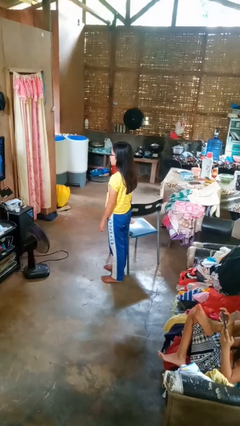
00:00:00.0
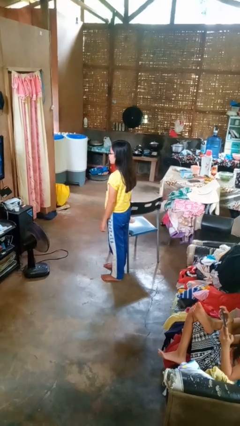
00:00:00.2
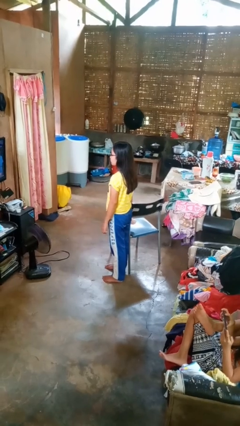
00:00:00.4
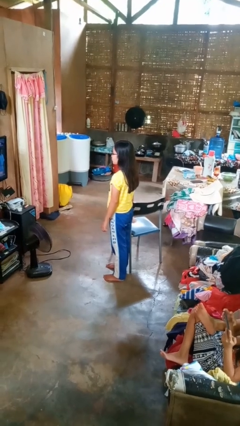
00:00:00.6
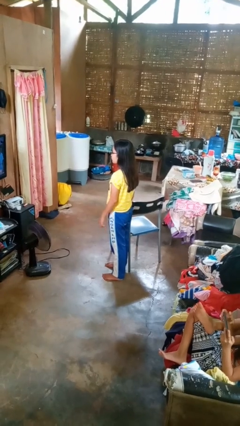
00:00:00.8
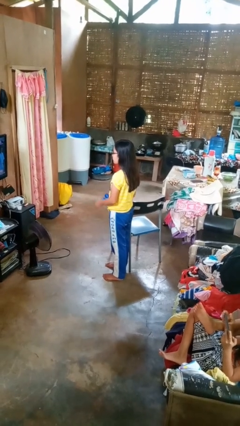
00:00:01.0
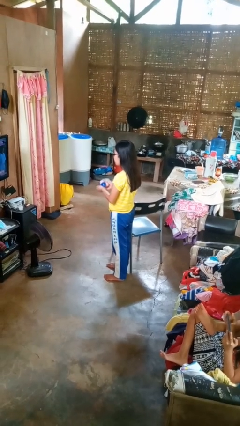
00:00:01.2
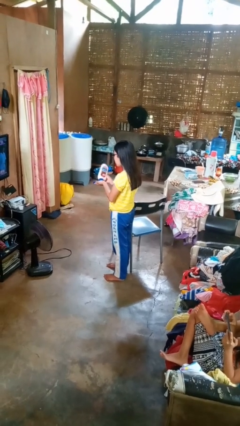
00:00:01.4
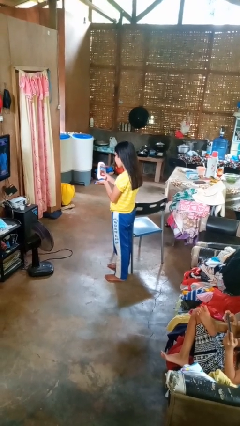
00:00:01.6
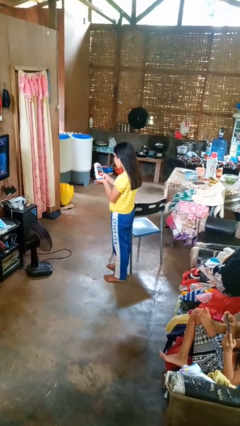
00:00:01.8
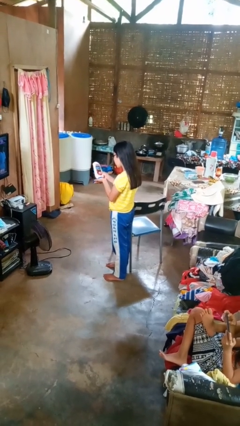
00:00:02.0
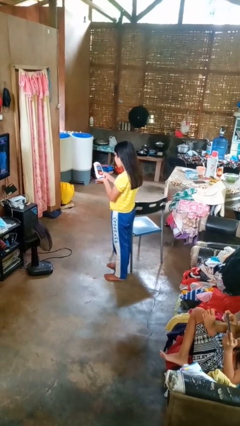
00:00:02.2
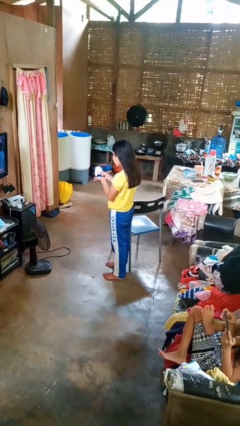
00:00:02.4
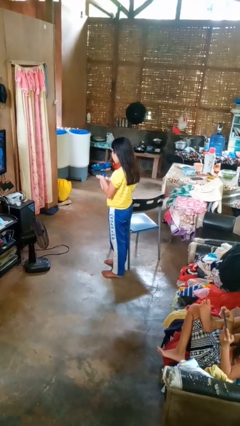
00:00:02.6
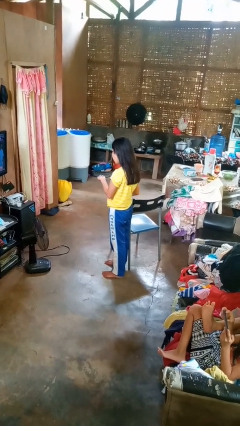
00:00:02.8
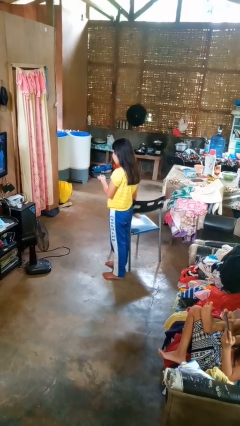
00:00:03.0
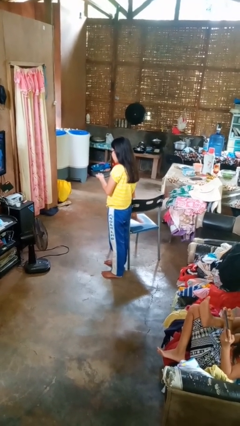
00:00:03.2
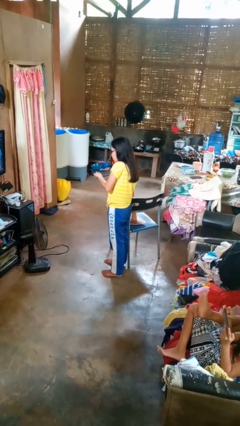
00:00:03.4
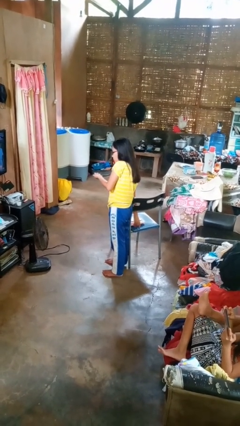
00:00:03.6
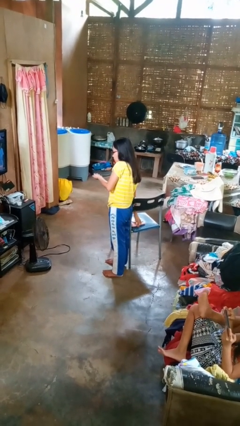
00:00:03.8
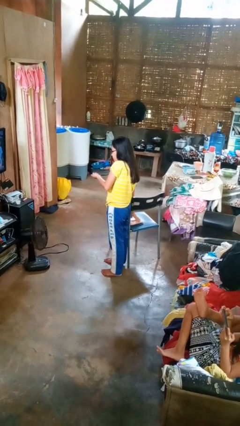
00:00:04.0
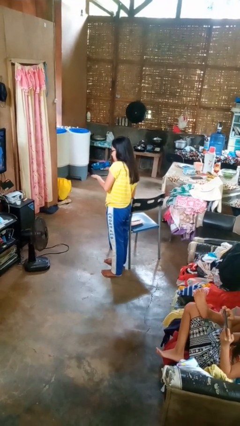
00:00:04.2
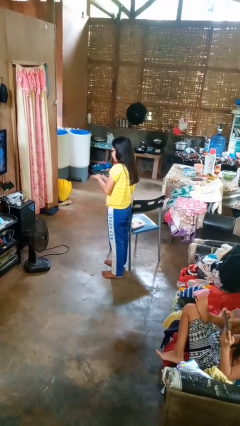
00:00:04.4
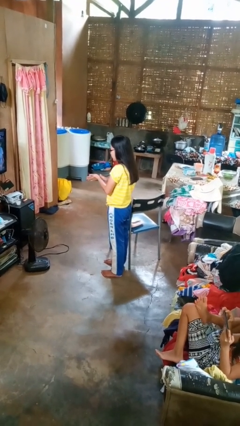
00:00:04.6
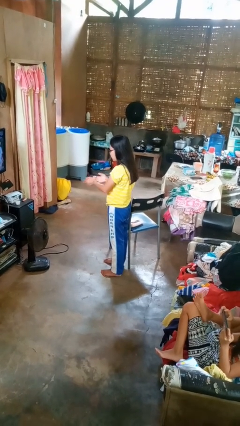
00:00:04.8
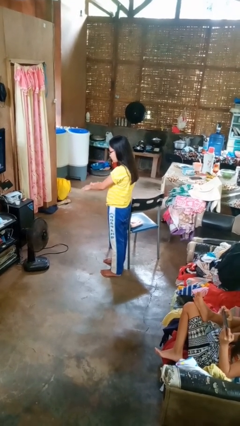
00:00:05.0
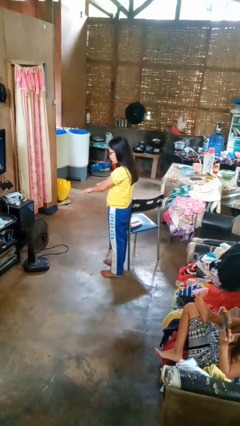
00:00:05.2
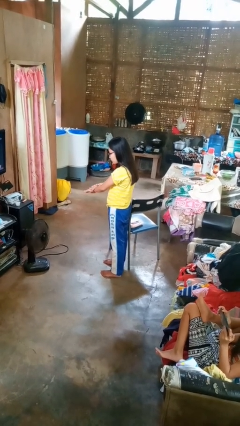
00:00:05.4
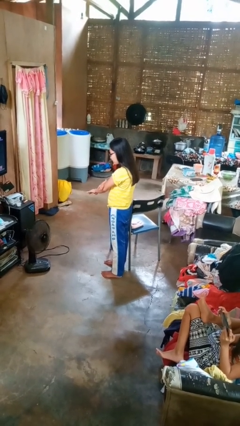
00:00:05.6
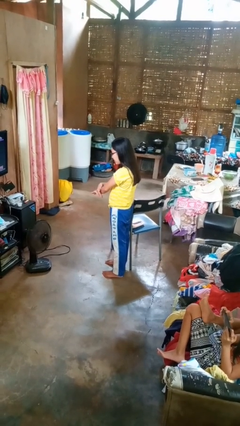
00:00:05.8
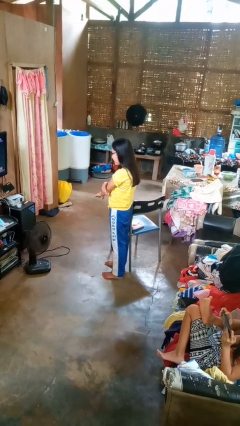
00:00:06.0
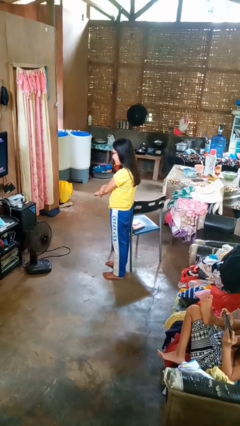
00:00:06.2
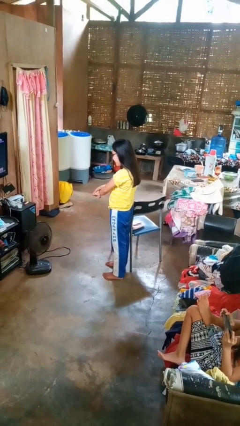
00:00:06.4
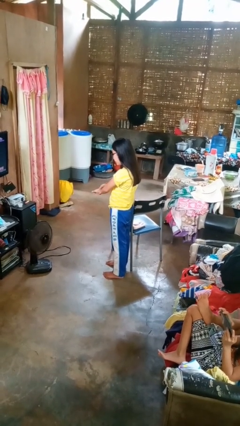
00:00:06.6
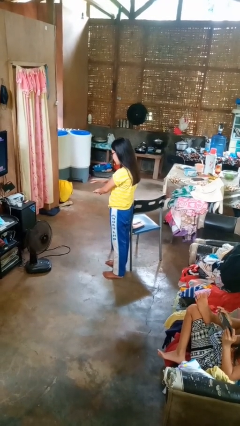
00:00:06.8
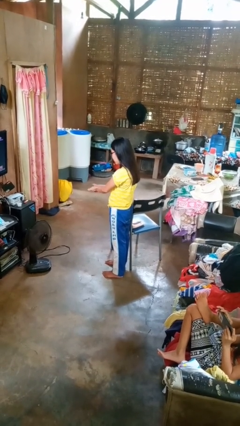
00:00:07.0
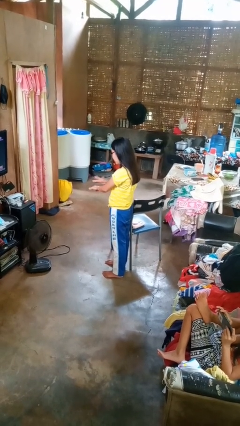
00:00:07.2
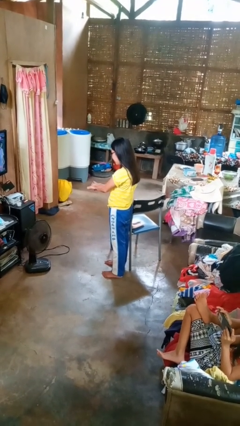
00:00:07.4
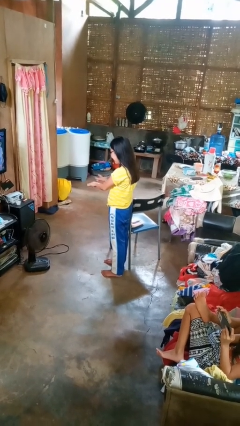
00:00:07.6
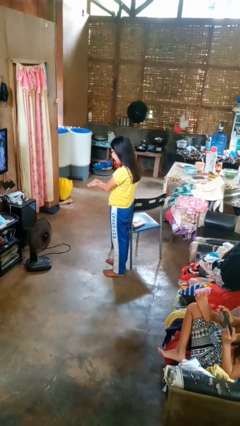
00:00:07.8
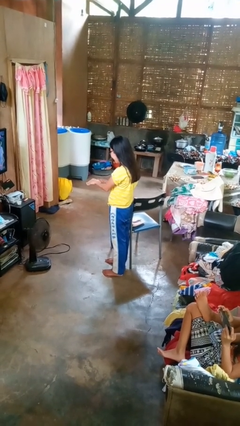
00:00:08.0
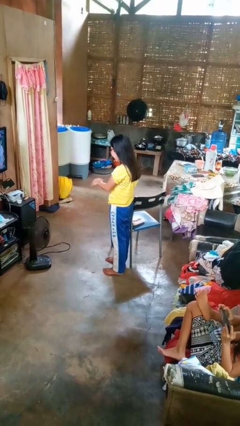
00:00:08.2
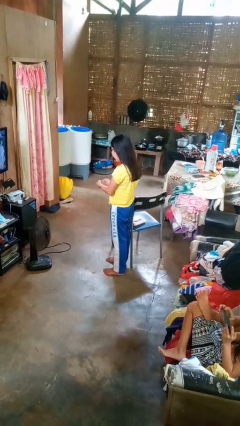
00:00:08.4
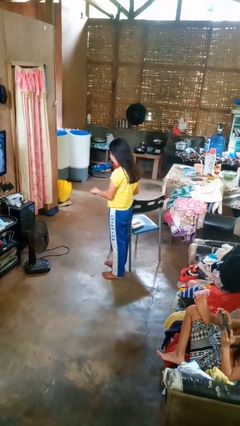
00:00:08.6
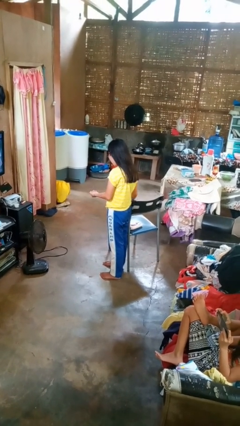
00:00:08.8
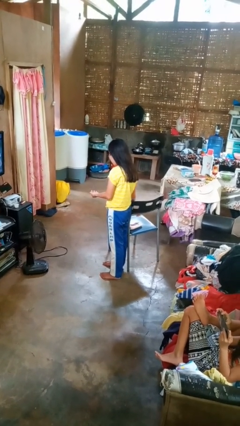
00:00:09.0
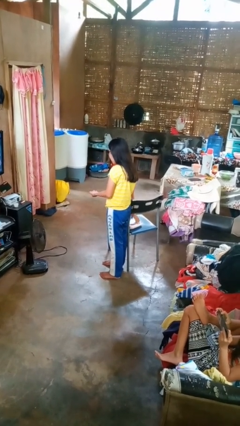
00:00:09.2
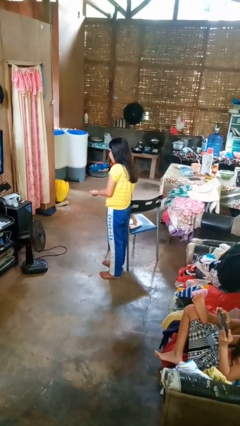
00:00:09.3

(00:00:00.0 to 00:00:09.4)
person applies sunscreen

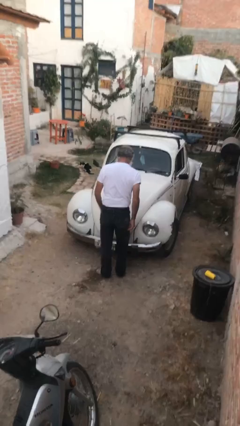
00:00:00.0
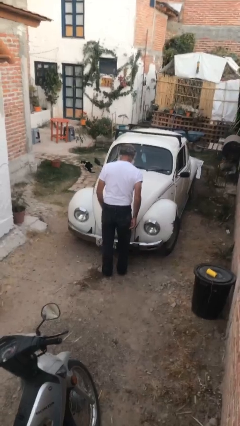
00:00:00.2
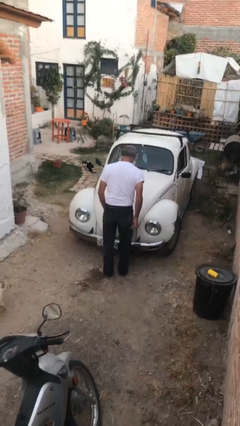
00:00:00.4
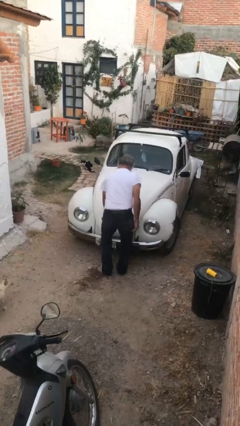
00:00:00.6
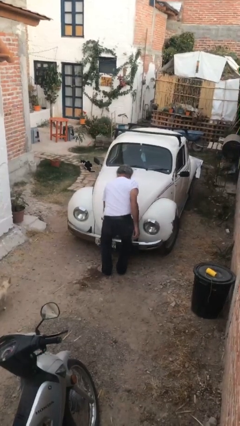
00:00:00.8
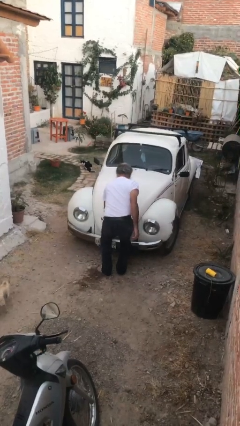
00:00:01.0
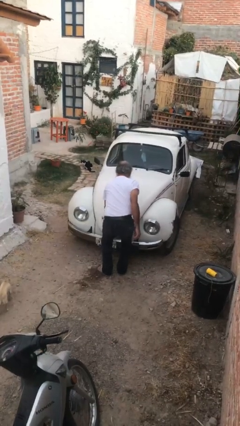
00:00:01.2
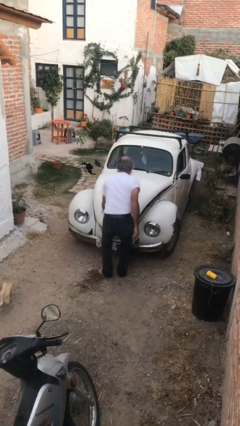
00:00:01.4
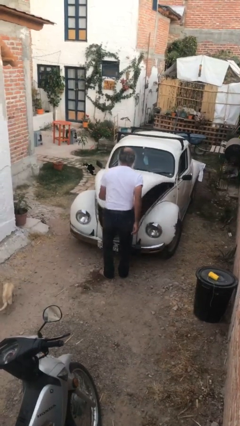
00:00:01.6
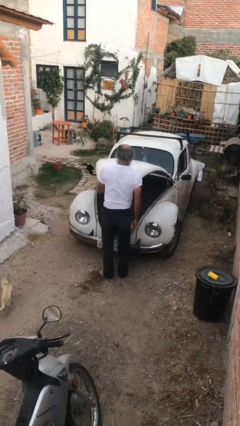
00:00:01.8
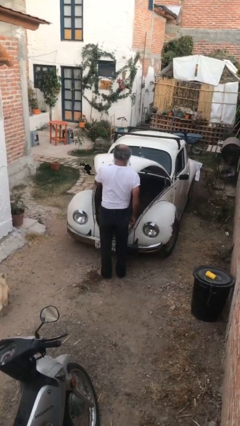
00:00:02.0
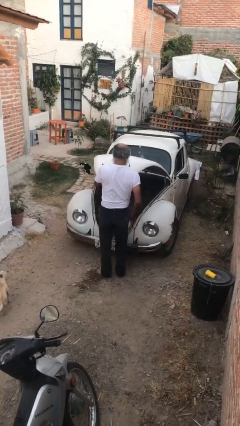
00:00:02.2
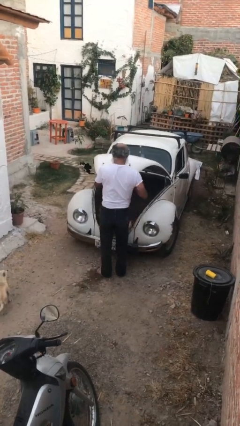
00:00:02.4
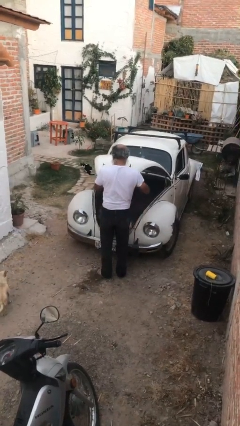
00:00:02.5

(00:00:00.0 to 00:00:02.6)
person opens car trunk

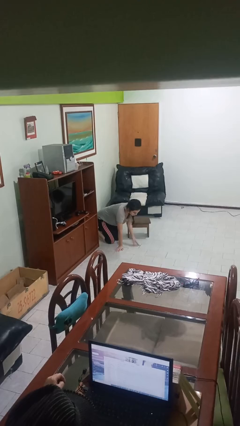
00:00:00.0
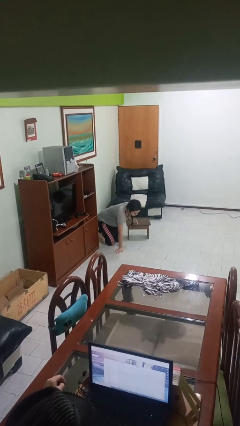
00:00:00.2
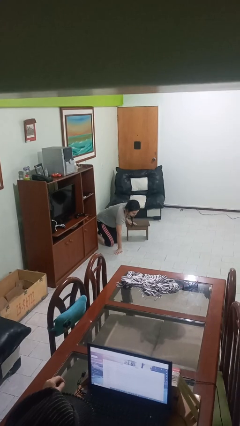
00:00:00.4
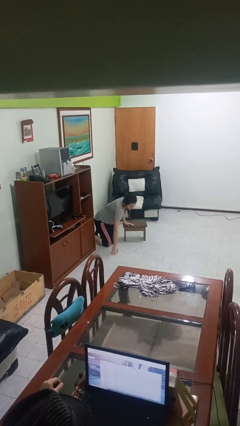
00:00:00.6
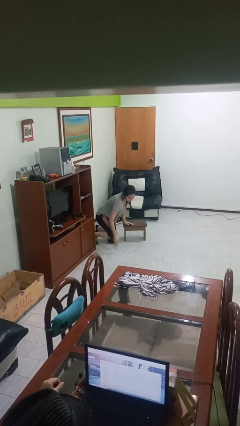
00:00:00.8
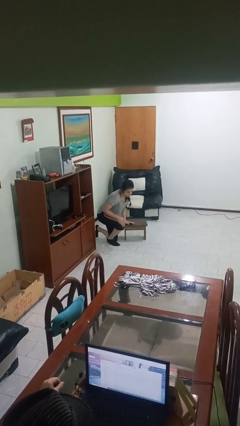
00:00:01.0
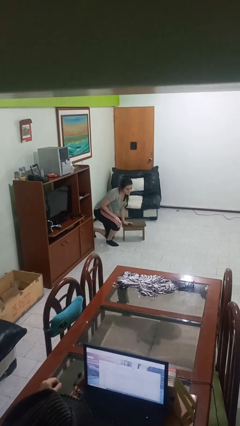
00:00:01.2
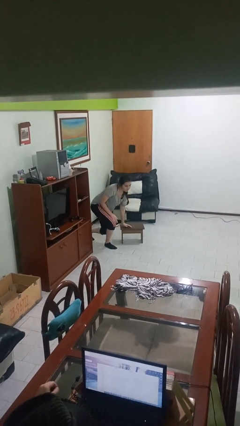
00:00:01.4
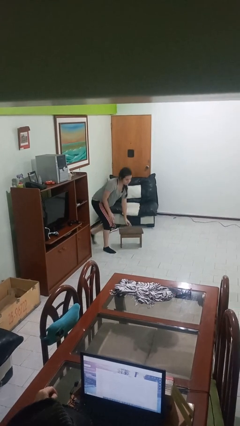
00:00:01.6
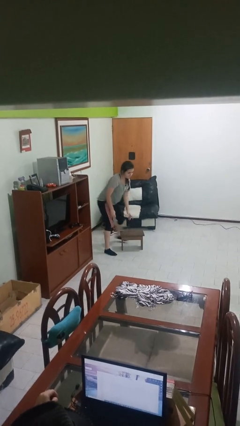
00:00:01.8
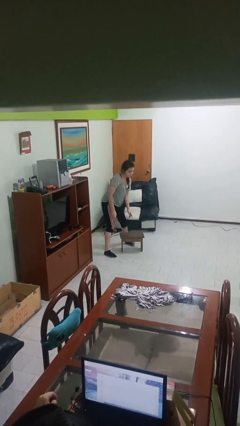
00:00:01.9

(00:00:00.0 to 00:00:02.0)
person stands up from floor

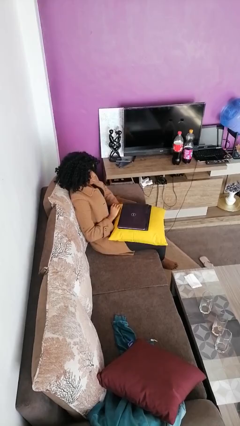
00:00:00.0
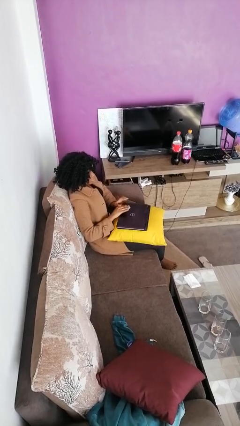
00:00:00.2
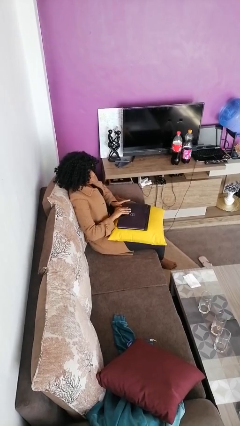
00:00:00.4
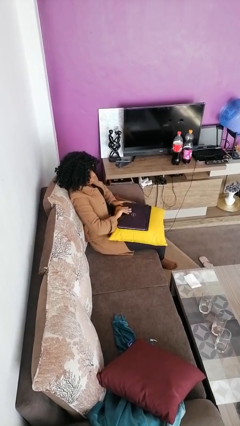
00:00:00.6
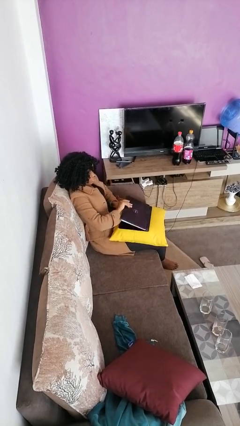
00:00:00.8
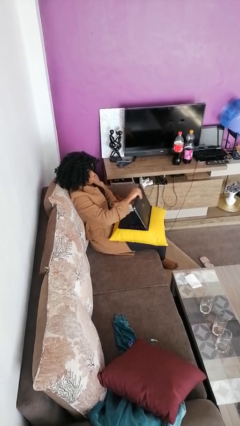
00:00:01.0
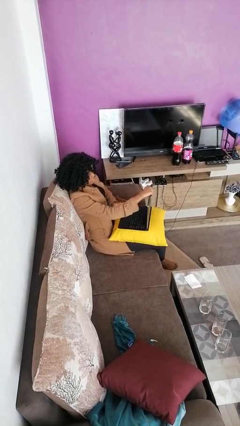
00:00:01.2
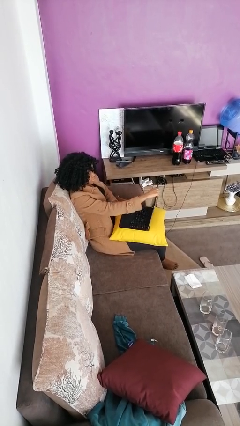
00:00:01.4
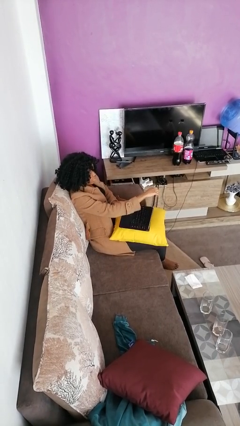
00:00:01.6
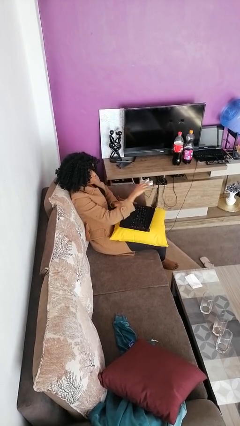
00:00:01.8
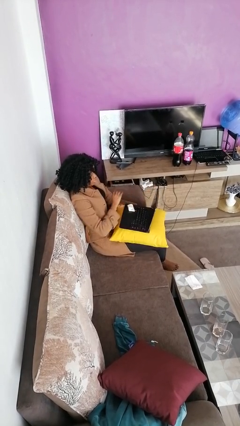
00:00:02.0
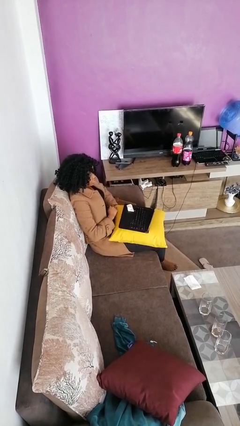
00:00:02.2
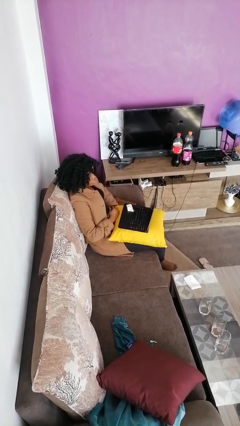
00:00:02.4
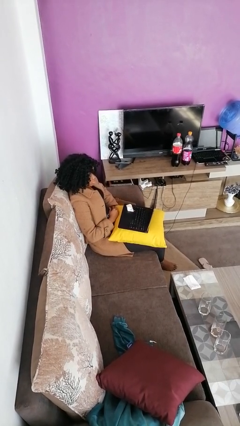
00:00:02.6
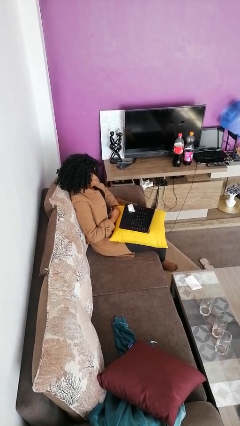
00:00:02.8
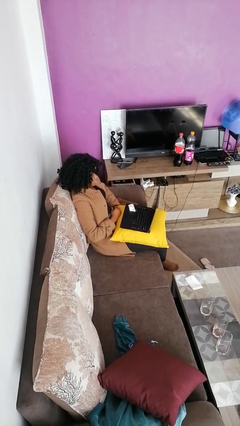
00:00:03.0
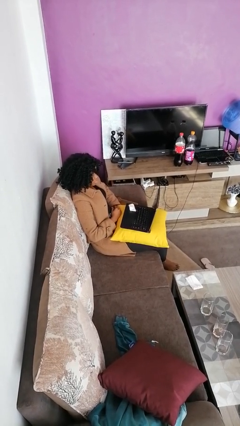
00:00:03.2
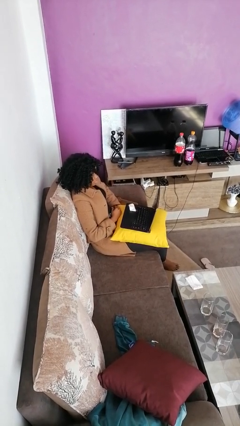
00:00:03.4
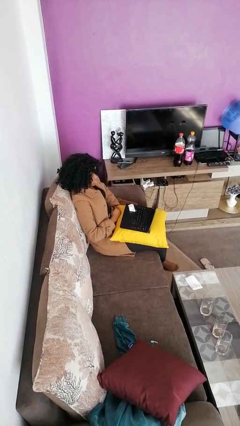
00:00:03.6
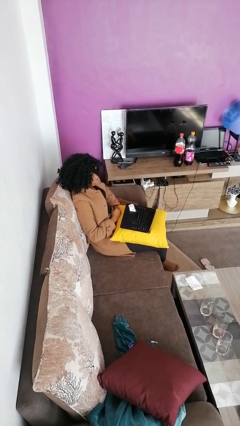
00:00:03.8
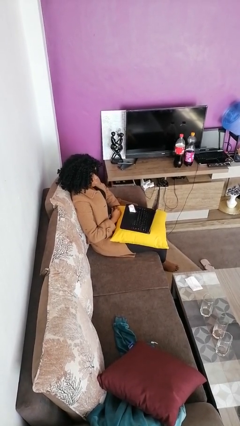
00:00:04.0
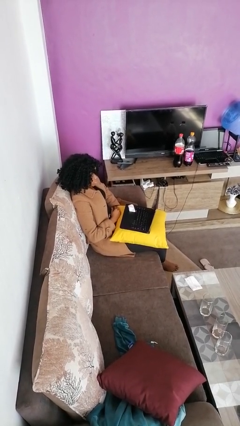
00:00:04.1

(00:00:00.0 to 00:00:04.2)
person opens laptop

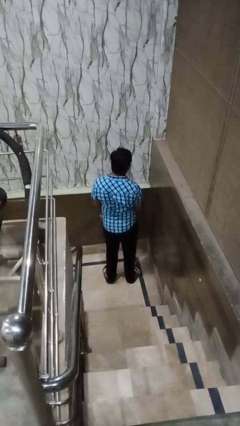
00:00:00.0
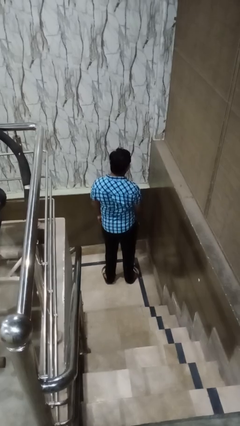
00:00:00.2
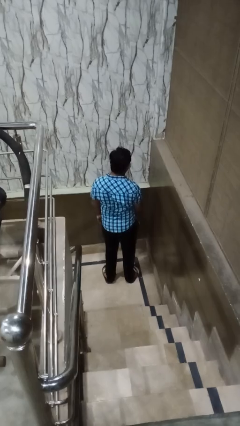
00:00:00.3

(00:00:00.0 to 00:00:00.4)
person sneezes into arm
